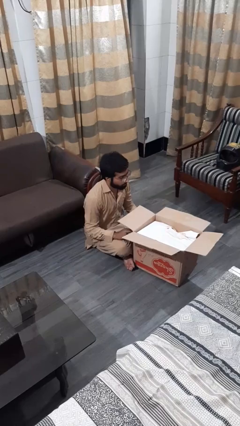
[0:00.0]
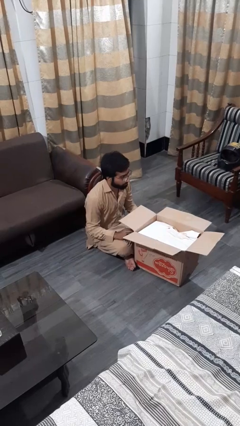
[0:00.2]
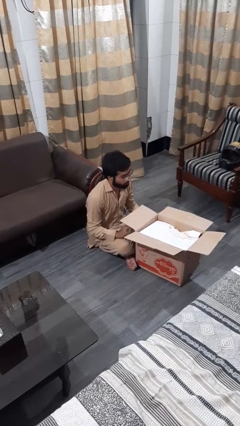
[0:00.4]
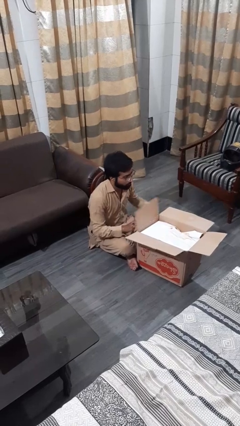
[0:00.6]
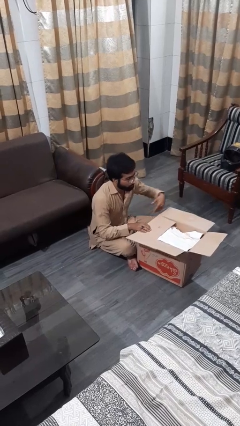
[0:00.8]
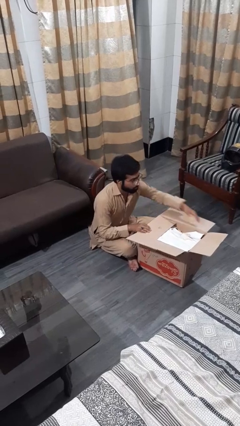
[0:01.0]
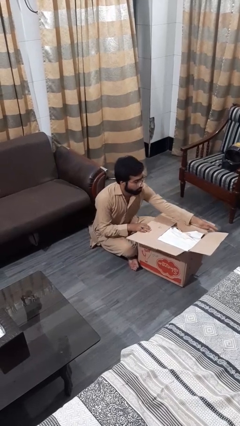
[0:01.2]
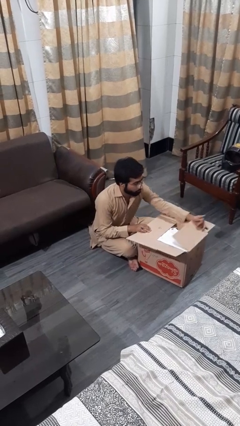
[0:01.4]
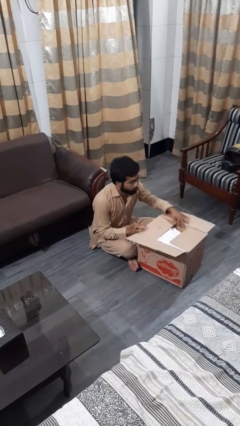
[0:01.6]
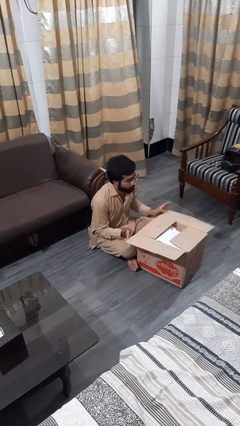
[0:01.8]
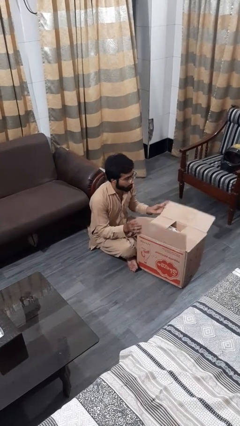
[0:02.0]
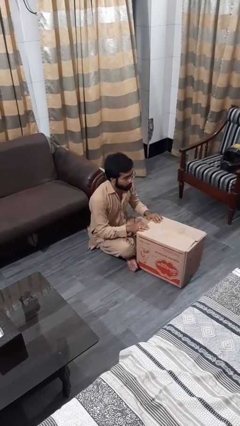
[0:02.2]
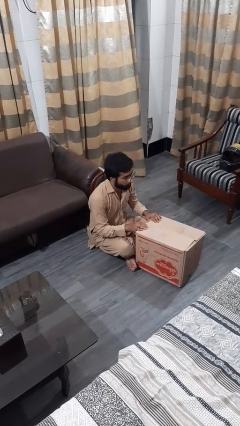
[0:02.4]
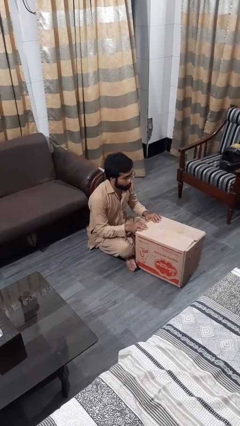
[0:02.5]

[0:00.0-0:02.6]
person closes box

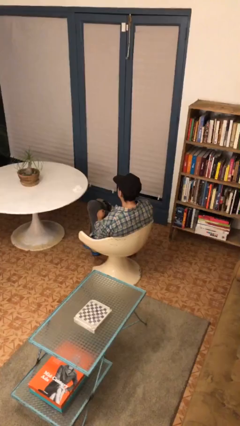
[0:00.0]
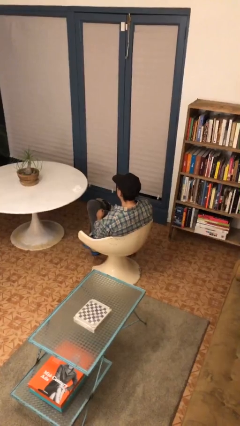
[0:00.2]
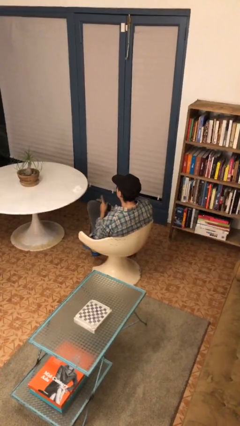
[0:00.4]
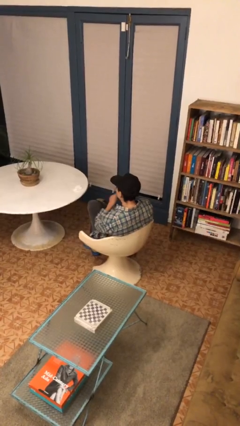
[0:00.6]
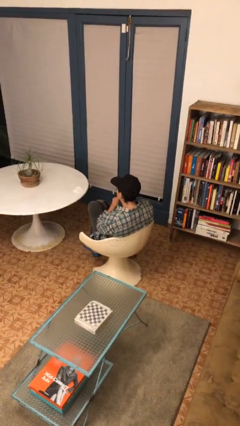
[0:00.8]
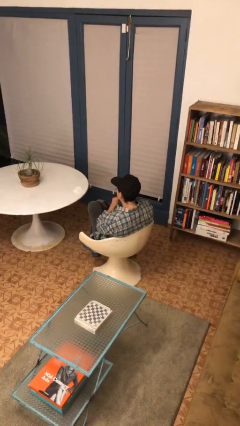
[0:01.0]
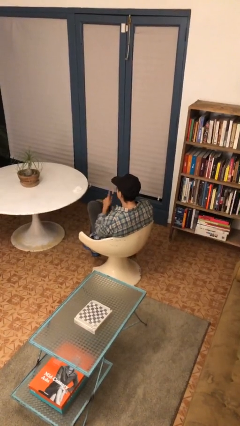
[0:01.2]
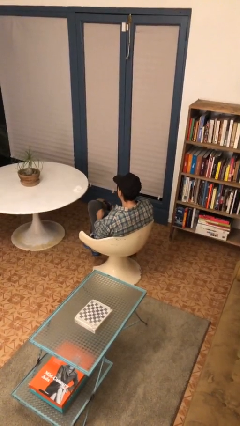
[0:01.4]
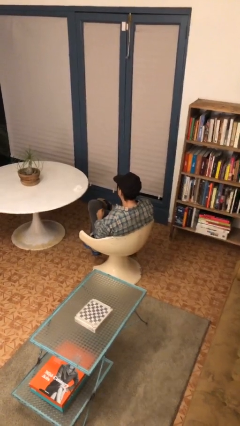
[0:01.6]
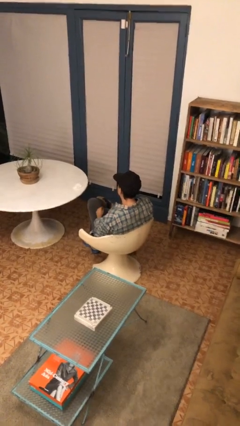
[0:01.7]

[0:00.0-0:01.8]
person gestures be quiet

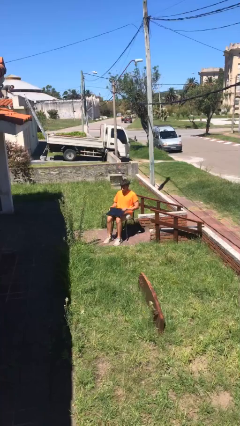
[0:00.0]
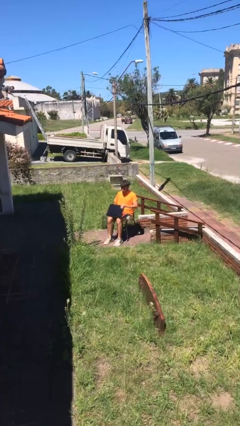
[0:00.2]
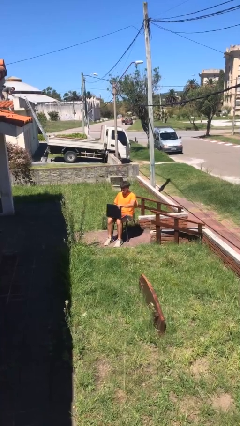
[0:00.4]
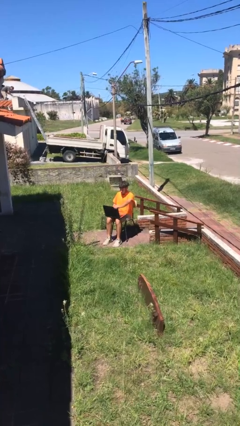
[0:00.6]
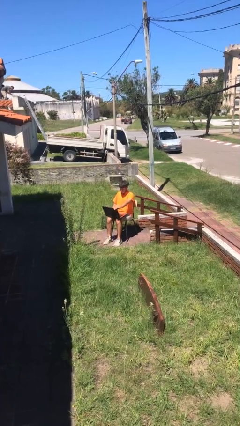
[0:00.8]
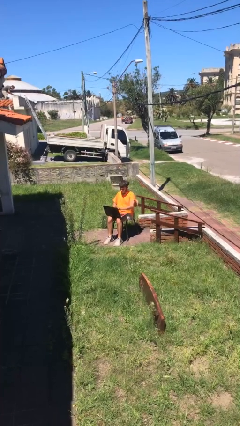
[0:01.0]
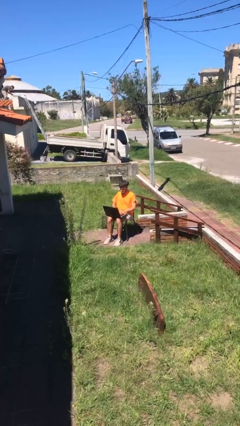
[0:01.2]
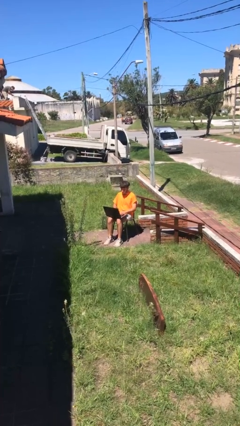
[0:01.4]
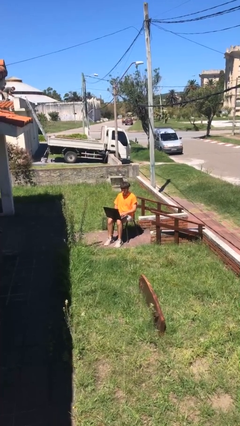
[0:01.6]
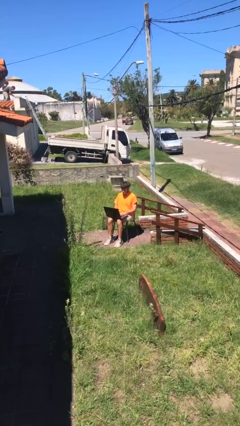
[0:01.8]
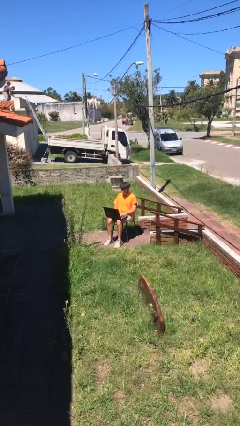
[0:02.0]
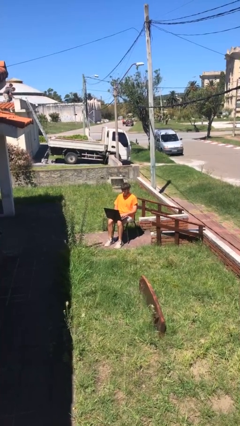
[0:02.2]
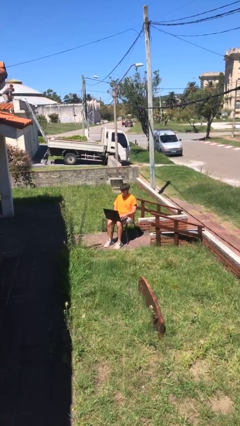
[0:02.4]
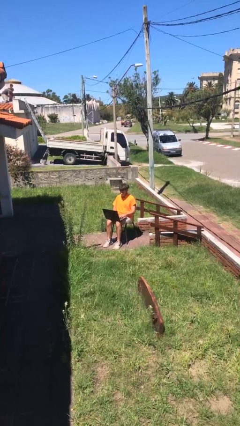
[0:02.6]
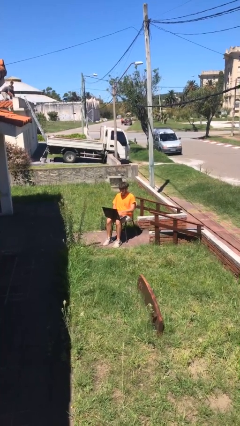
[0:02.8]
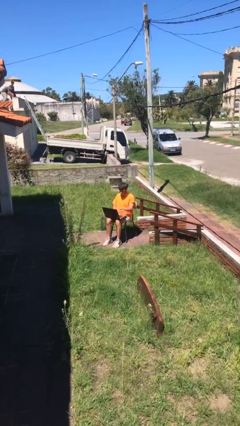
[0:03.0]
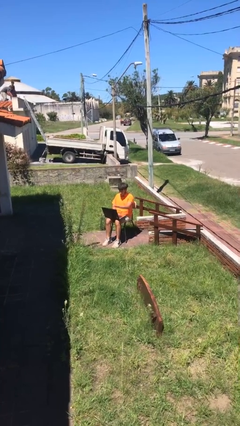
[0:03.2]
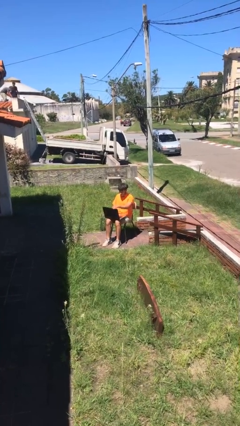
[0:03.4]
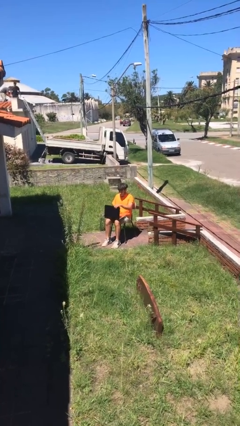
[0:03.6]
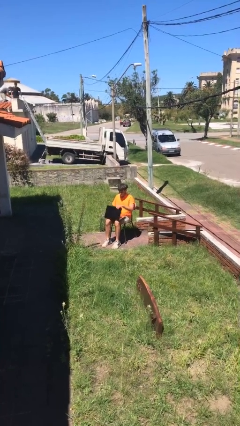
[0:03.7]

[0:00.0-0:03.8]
person interacts with laptop

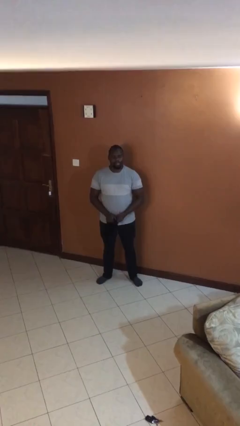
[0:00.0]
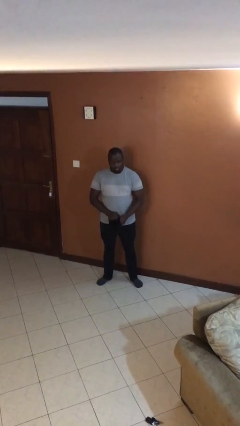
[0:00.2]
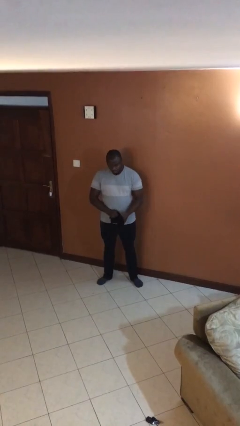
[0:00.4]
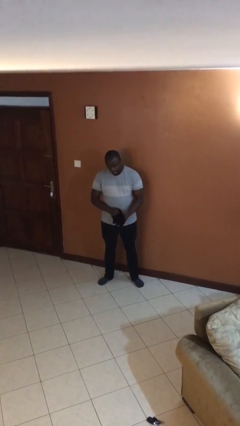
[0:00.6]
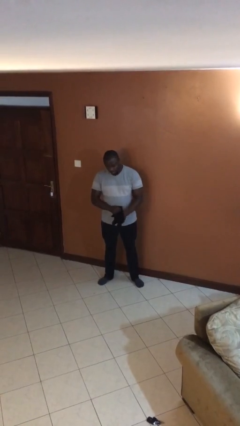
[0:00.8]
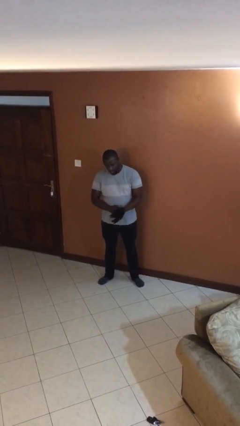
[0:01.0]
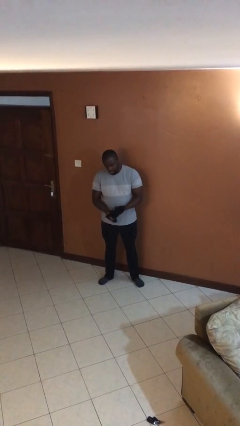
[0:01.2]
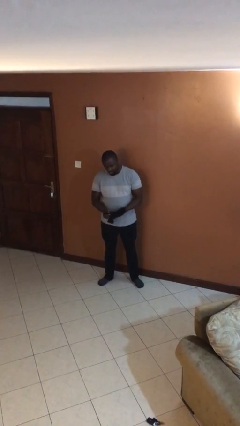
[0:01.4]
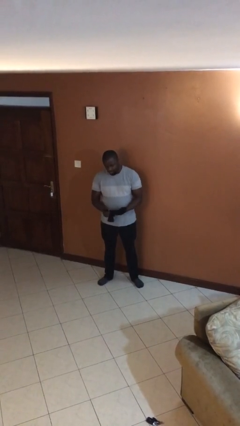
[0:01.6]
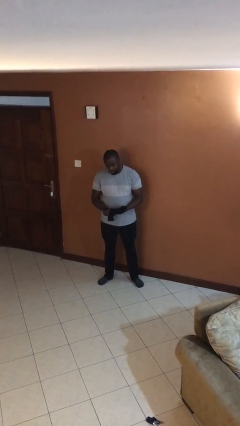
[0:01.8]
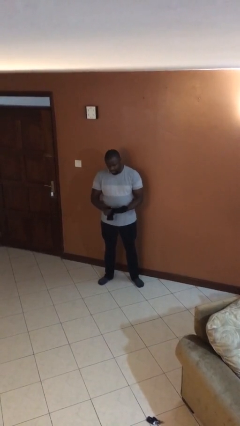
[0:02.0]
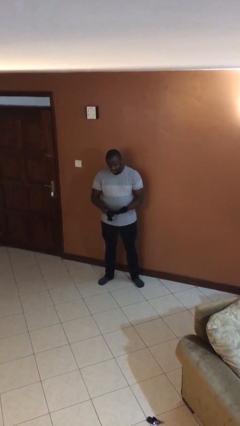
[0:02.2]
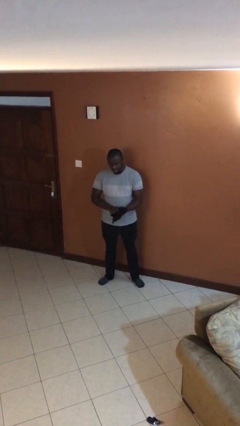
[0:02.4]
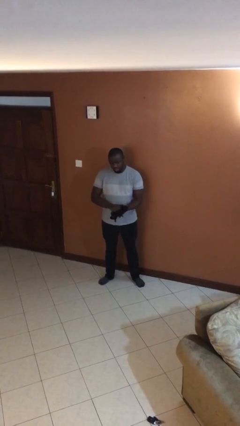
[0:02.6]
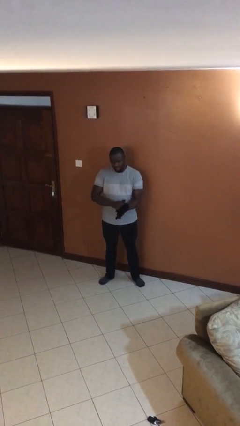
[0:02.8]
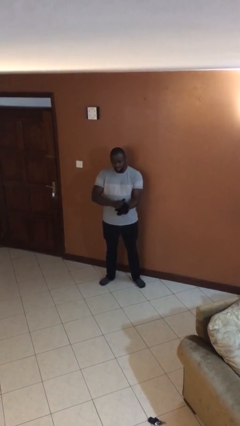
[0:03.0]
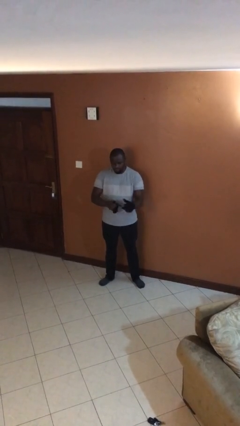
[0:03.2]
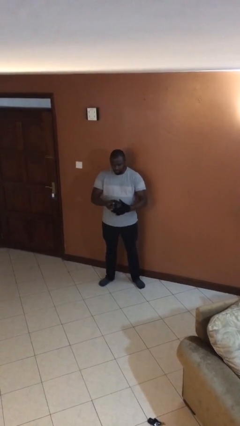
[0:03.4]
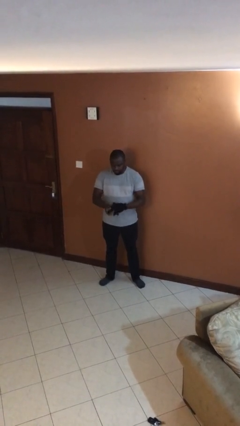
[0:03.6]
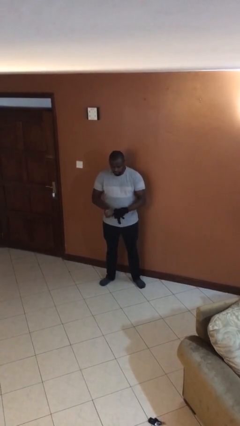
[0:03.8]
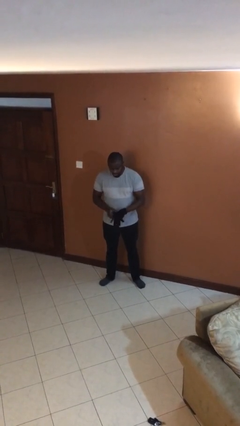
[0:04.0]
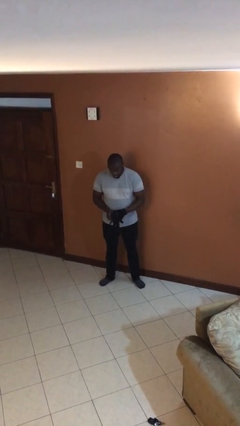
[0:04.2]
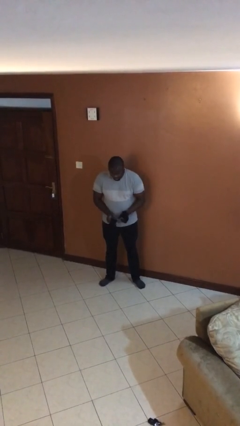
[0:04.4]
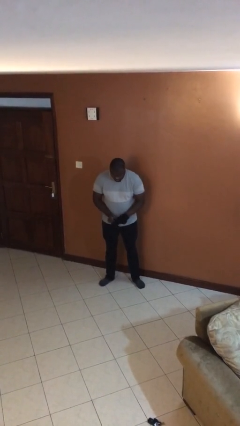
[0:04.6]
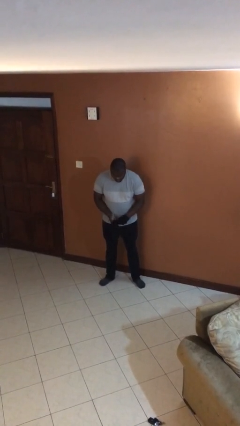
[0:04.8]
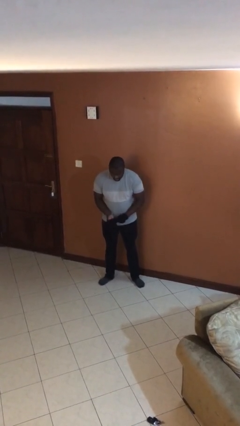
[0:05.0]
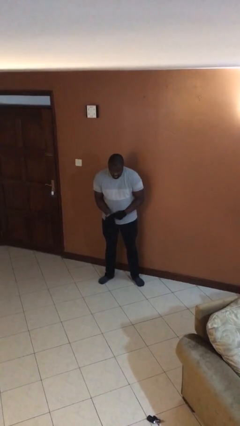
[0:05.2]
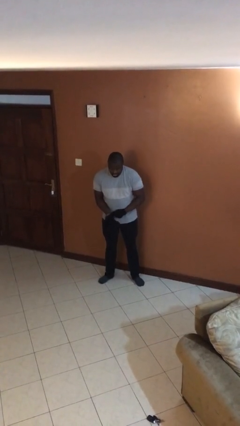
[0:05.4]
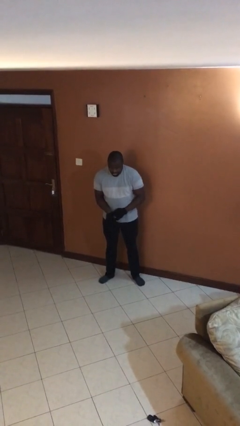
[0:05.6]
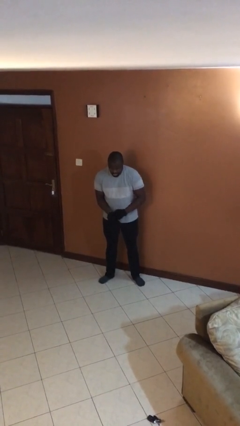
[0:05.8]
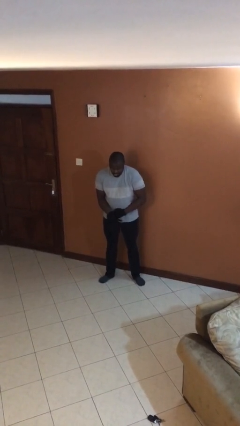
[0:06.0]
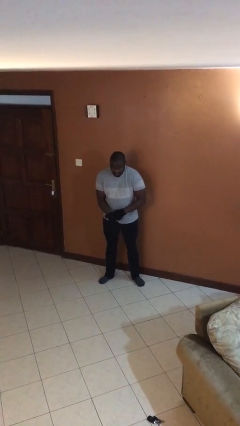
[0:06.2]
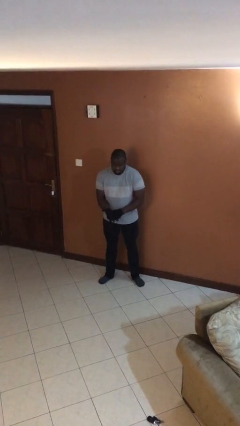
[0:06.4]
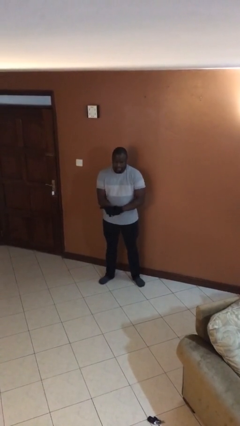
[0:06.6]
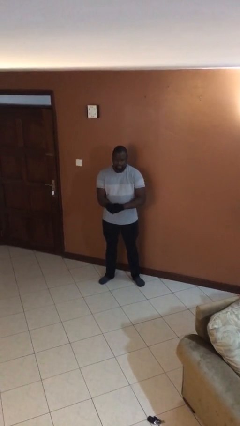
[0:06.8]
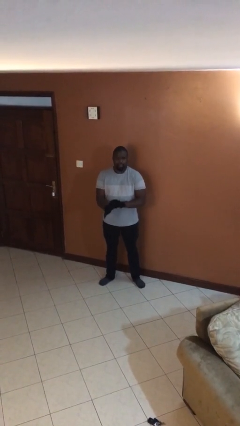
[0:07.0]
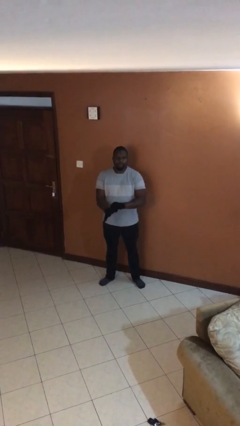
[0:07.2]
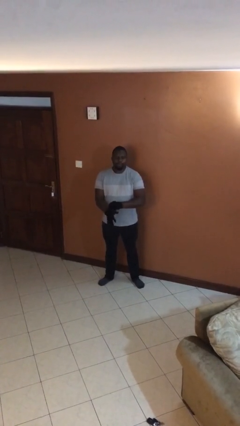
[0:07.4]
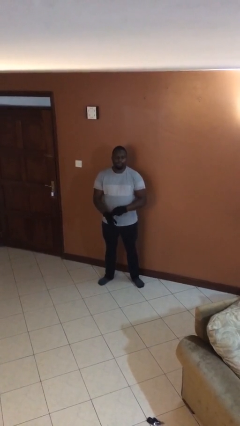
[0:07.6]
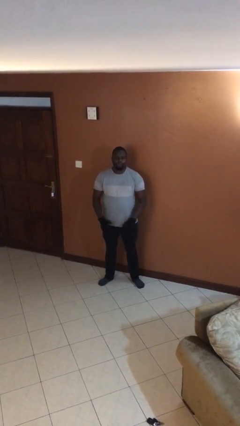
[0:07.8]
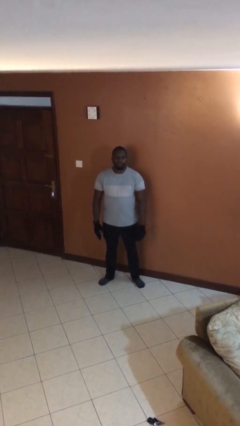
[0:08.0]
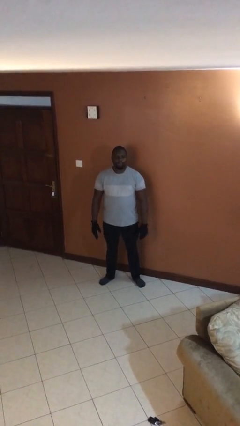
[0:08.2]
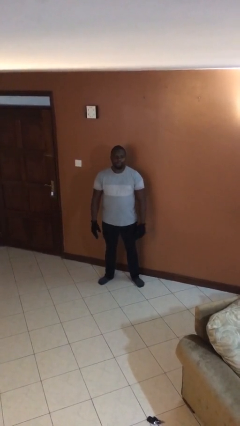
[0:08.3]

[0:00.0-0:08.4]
person puts on gloves

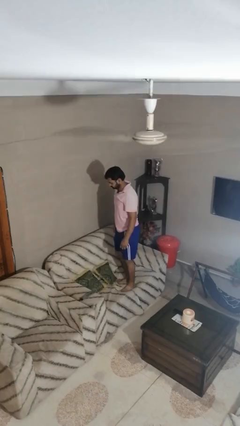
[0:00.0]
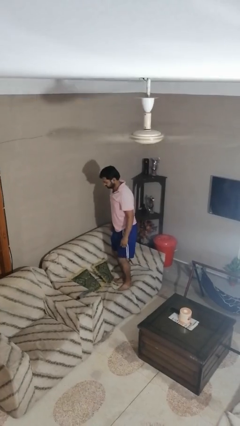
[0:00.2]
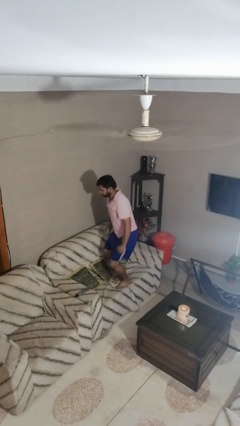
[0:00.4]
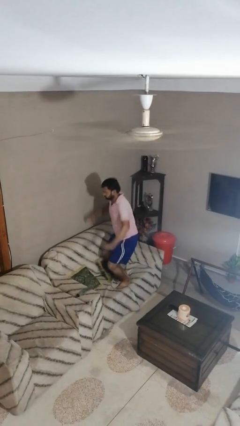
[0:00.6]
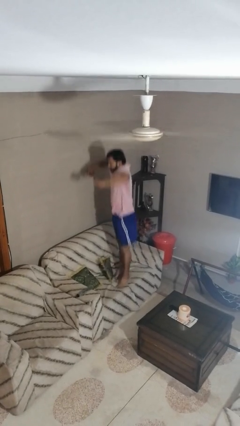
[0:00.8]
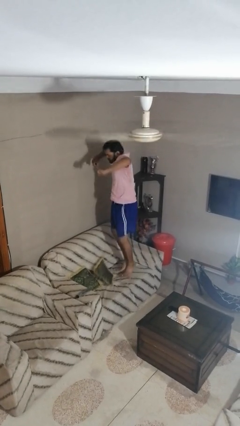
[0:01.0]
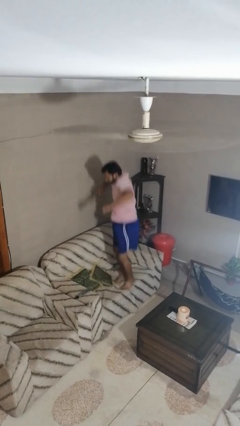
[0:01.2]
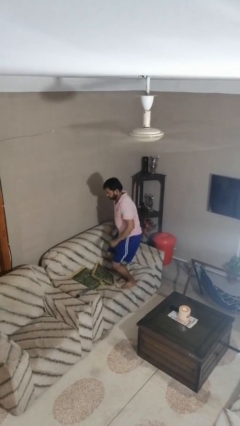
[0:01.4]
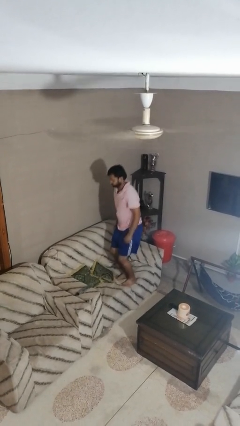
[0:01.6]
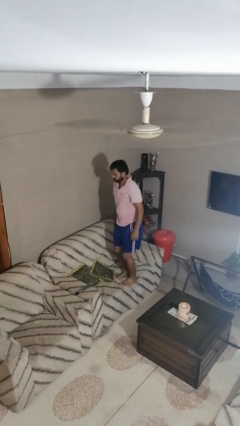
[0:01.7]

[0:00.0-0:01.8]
person jumps on couch
